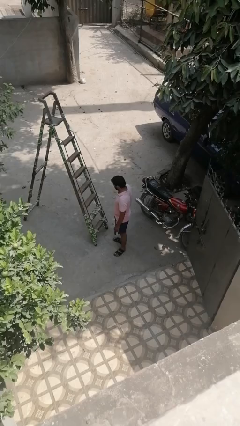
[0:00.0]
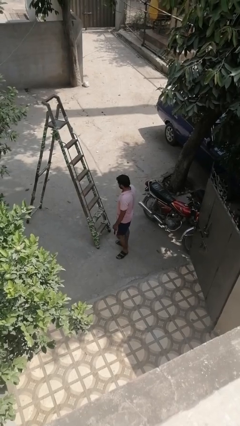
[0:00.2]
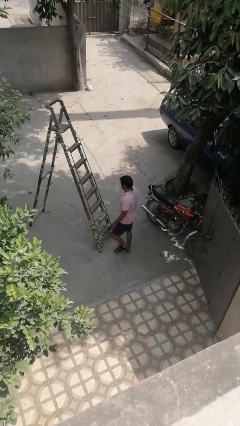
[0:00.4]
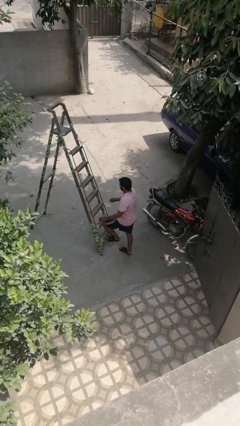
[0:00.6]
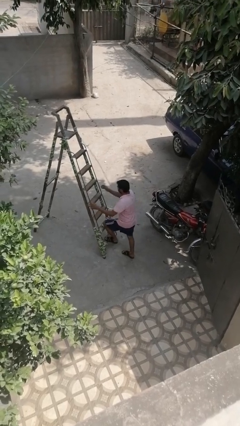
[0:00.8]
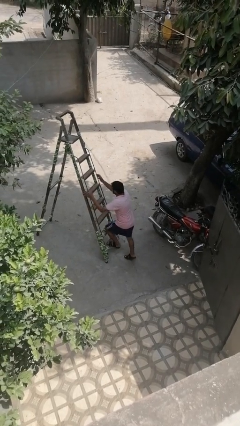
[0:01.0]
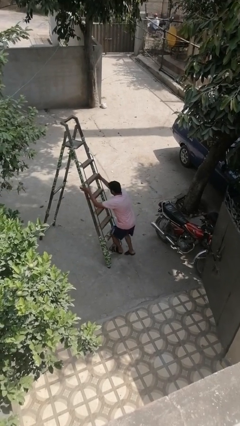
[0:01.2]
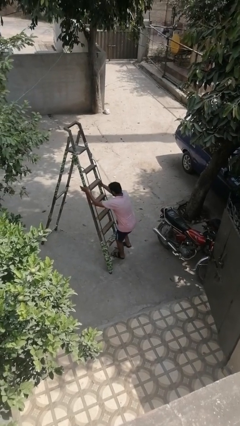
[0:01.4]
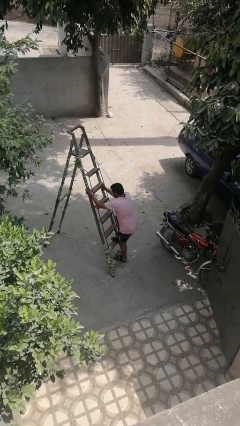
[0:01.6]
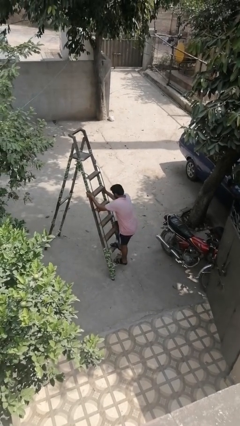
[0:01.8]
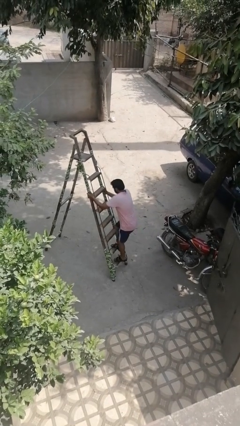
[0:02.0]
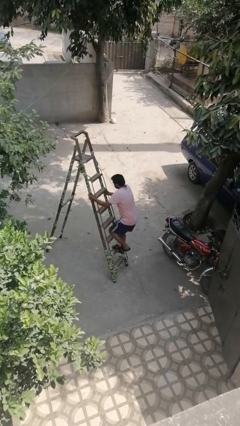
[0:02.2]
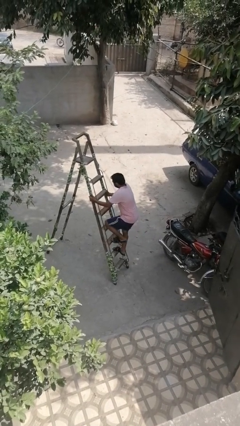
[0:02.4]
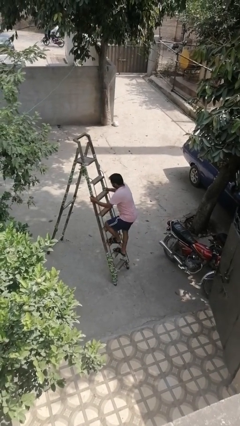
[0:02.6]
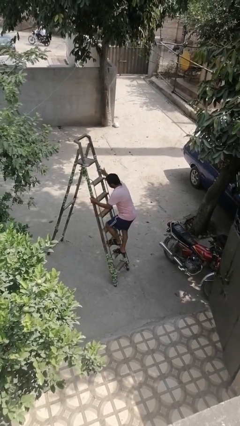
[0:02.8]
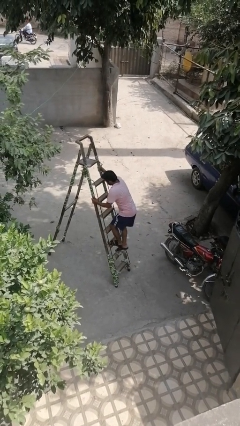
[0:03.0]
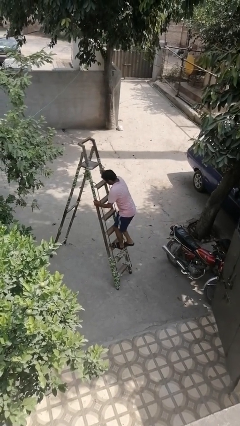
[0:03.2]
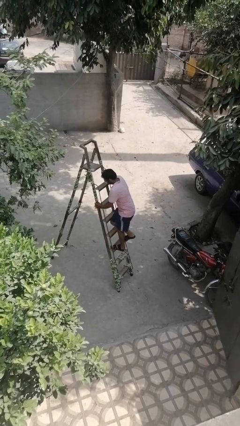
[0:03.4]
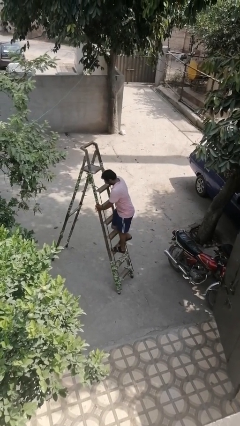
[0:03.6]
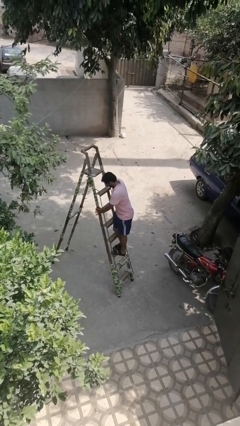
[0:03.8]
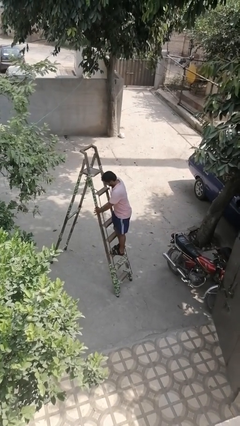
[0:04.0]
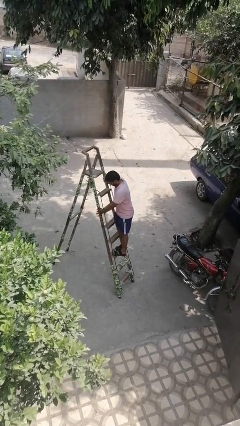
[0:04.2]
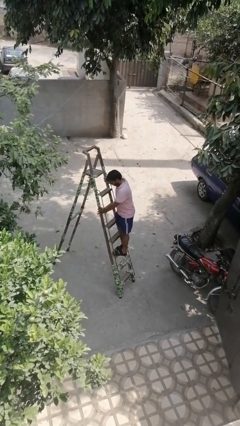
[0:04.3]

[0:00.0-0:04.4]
person climbs up ladder

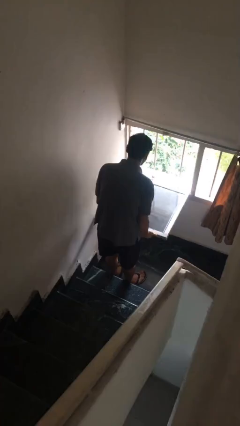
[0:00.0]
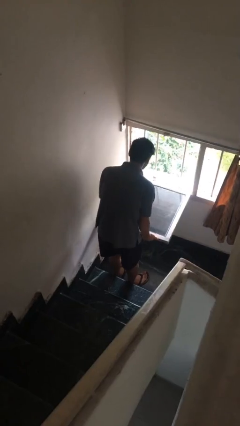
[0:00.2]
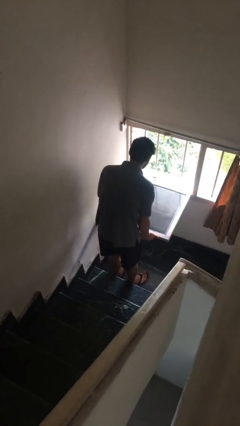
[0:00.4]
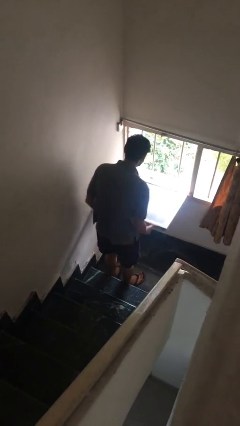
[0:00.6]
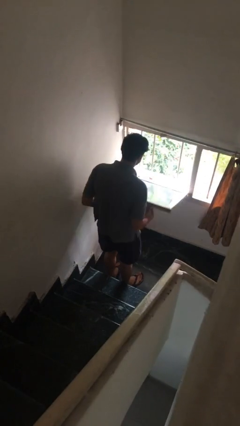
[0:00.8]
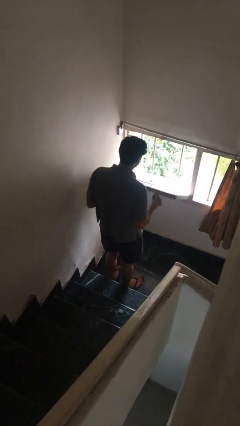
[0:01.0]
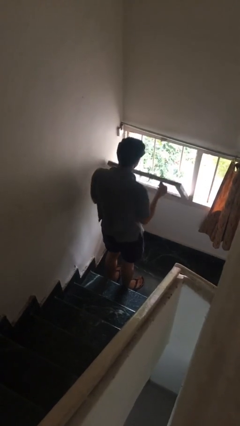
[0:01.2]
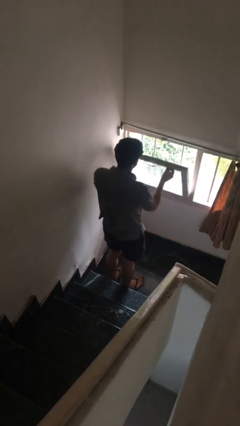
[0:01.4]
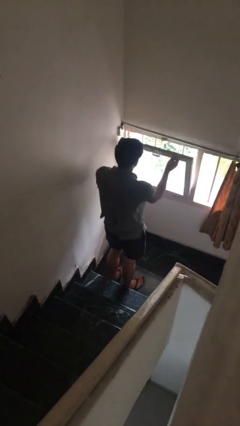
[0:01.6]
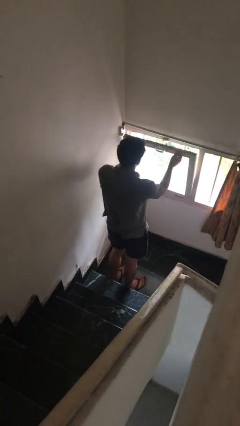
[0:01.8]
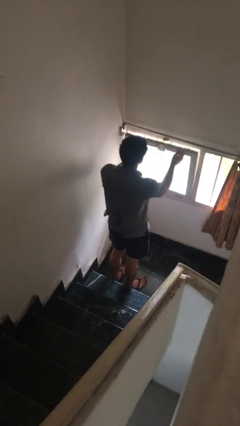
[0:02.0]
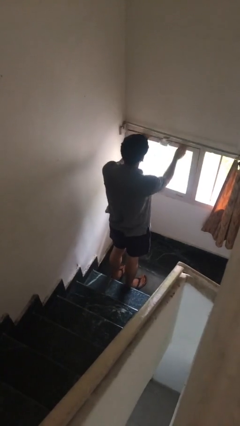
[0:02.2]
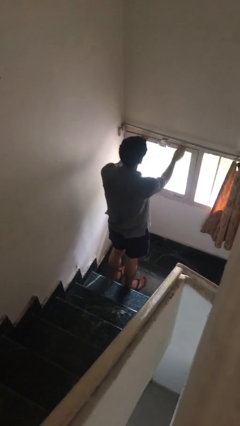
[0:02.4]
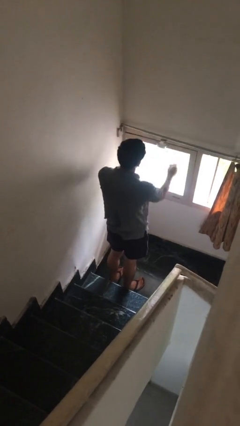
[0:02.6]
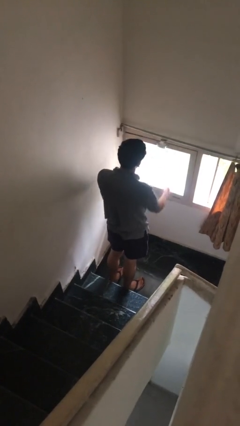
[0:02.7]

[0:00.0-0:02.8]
person closes home window

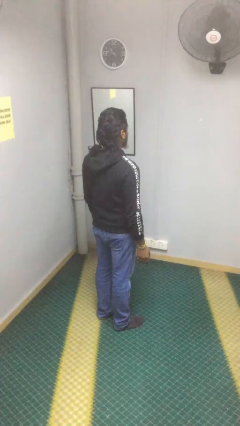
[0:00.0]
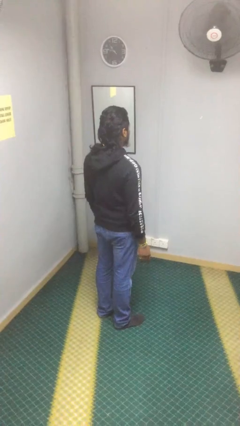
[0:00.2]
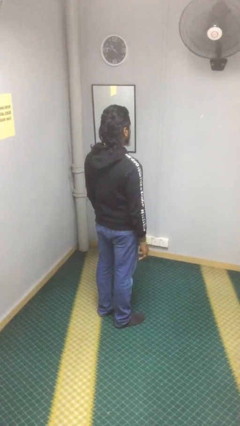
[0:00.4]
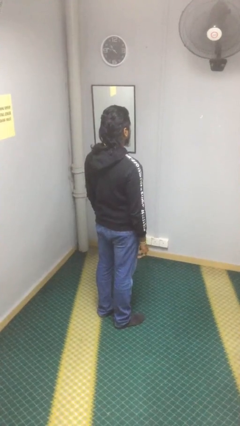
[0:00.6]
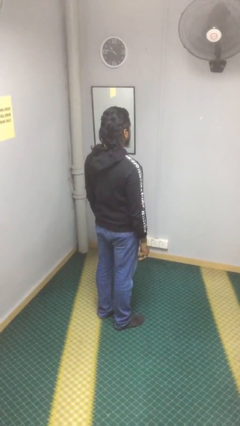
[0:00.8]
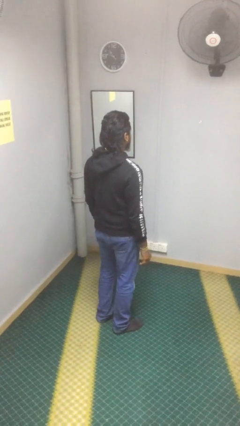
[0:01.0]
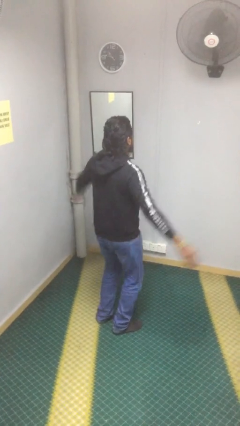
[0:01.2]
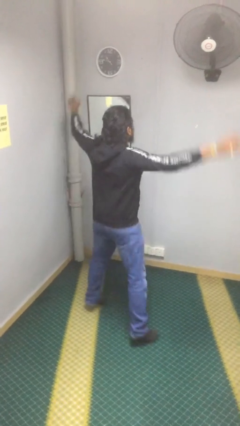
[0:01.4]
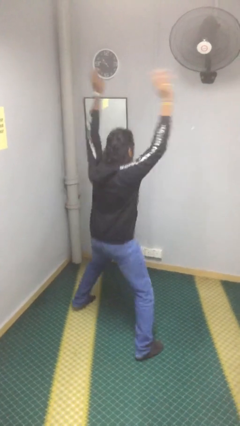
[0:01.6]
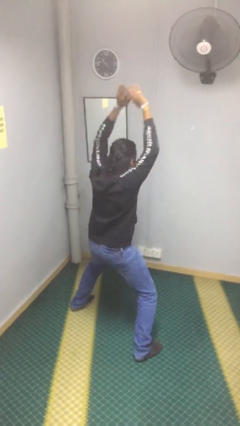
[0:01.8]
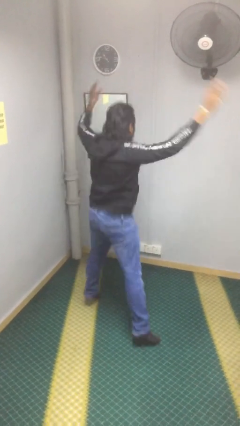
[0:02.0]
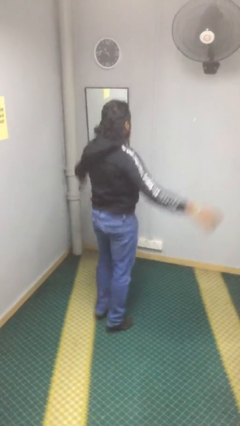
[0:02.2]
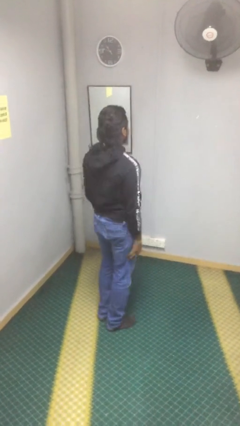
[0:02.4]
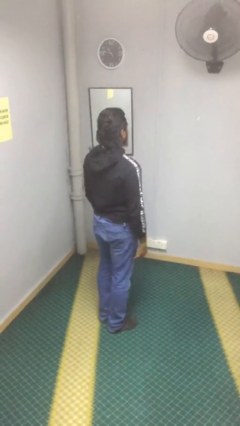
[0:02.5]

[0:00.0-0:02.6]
person exercises with jumping jacks

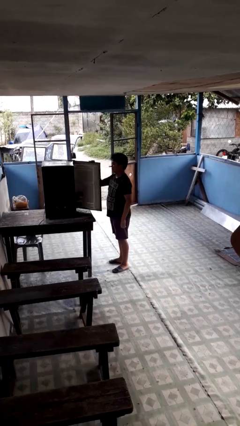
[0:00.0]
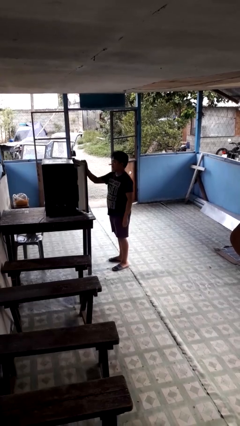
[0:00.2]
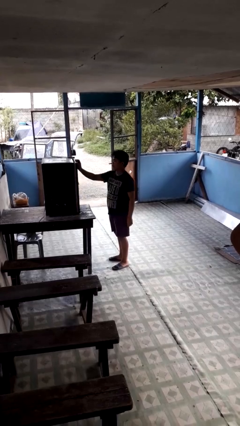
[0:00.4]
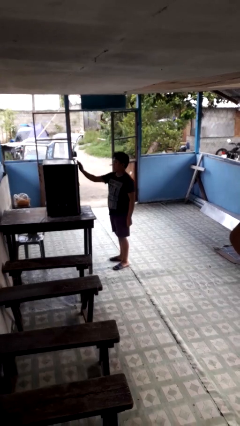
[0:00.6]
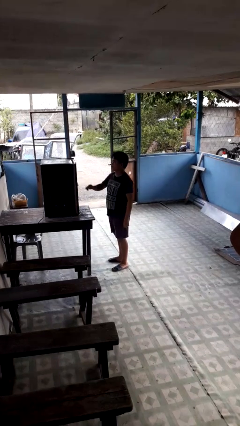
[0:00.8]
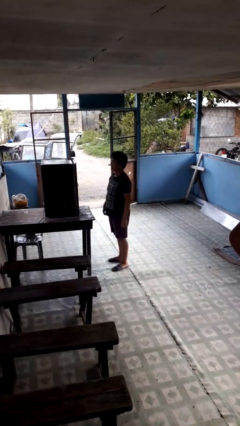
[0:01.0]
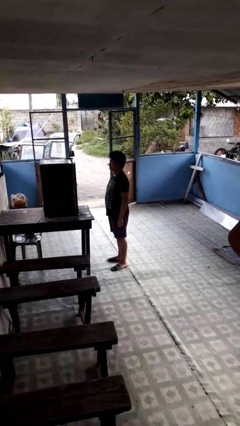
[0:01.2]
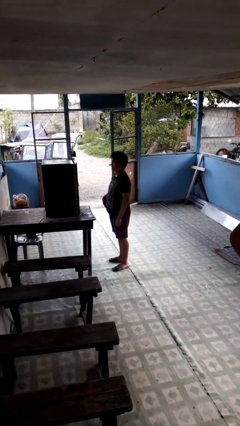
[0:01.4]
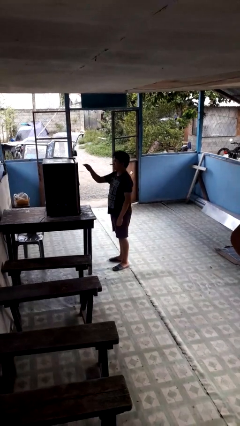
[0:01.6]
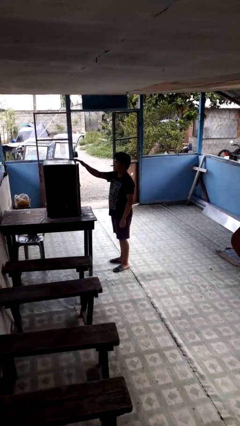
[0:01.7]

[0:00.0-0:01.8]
person closes refrigerator

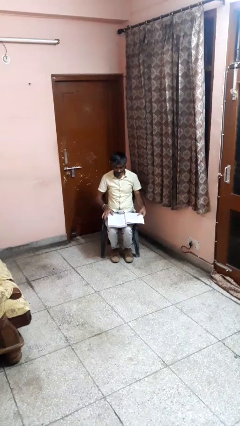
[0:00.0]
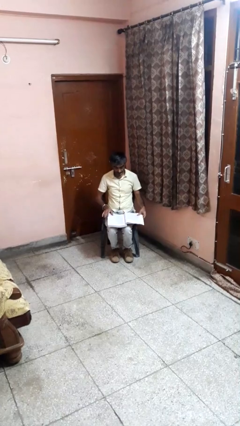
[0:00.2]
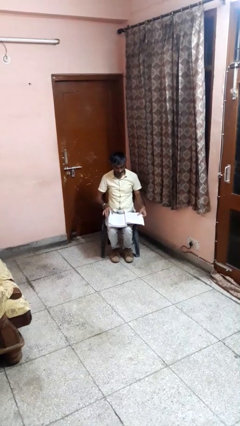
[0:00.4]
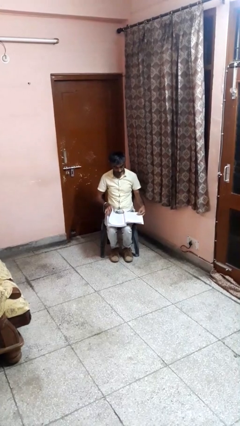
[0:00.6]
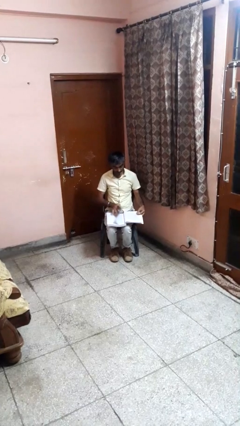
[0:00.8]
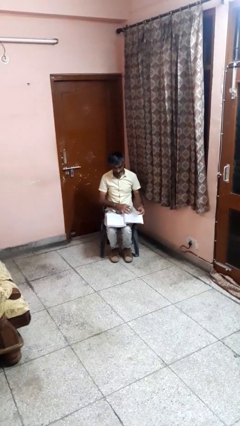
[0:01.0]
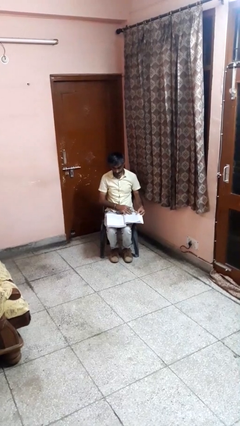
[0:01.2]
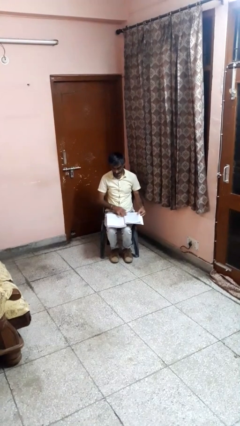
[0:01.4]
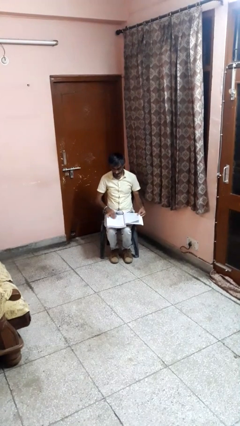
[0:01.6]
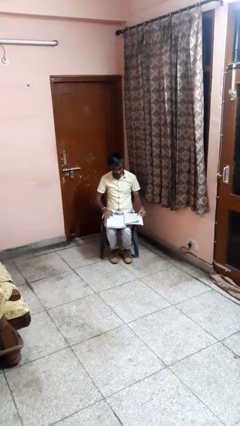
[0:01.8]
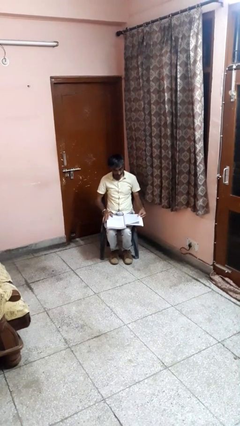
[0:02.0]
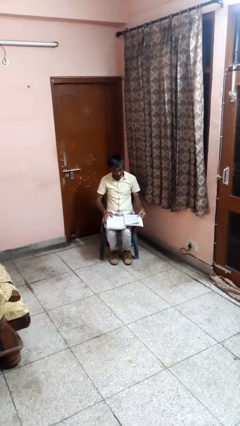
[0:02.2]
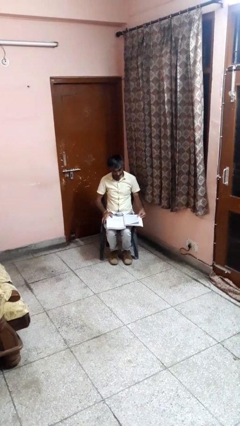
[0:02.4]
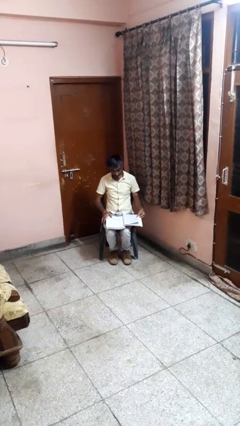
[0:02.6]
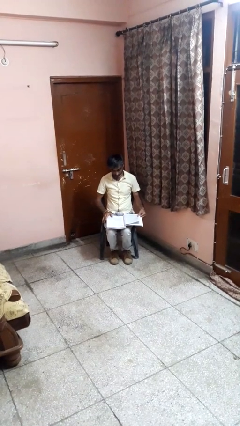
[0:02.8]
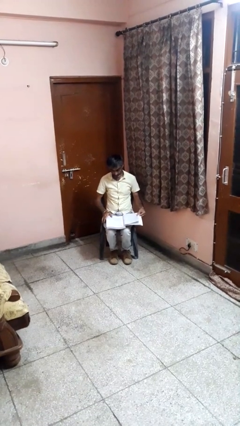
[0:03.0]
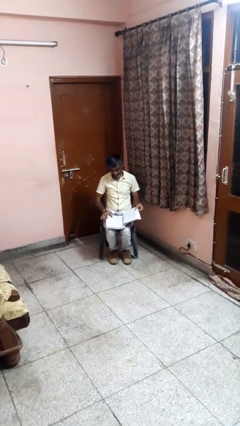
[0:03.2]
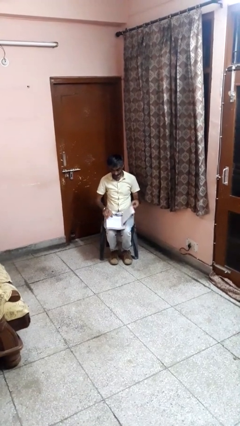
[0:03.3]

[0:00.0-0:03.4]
person reads book

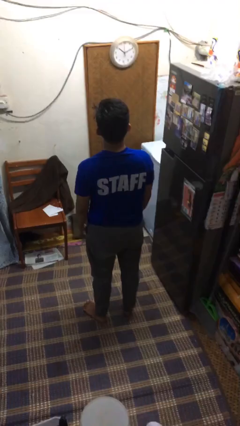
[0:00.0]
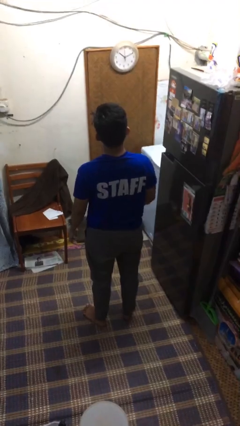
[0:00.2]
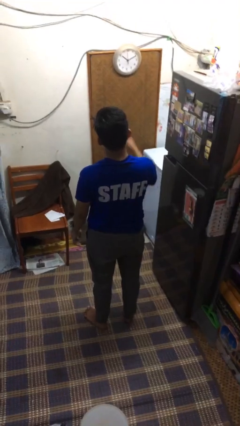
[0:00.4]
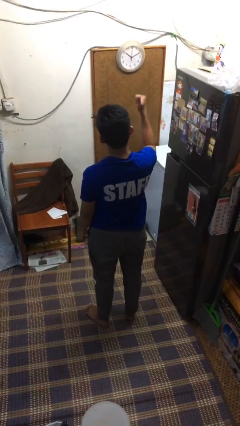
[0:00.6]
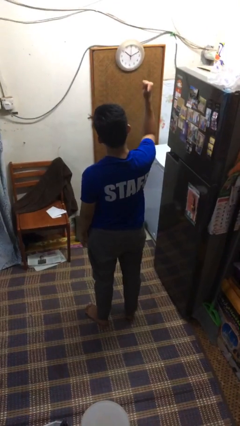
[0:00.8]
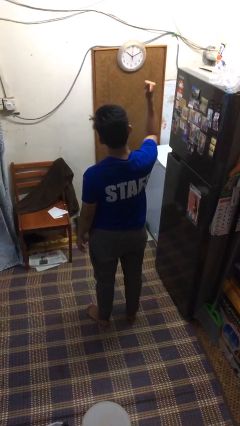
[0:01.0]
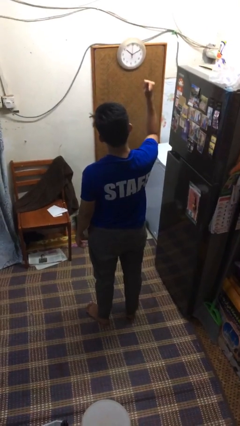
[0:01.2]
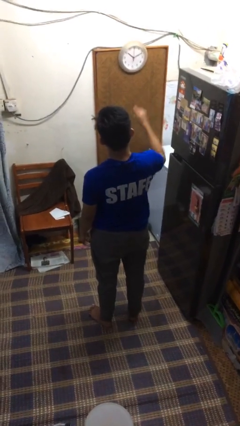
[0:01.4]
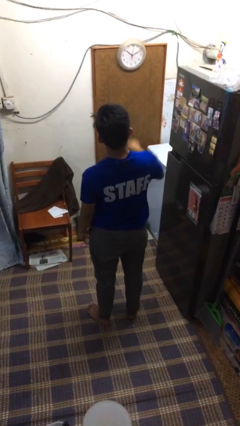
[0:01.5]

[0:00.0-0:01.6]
person gestures thumbs up

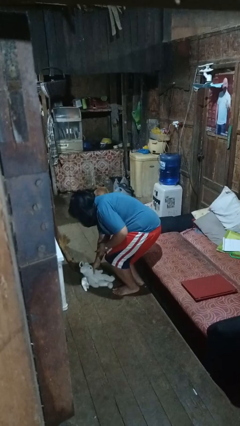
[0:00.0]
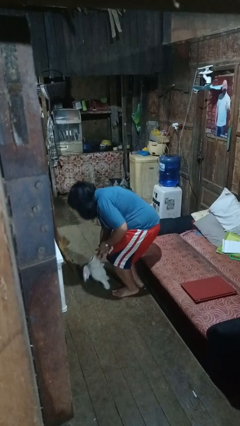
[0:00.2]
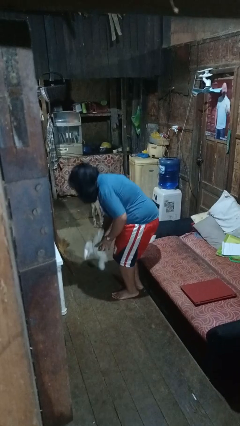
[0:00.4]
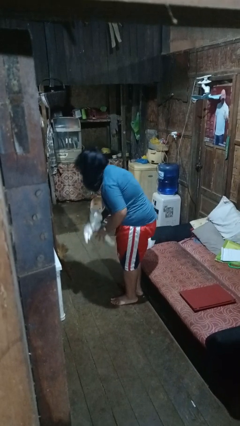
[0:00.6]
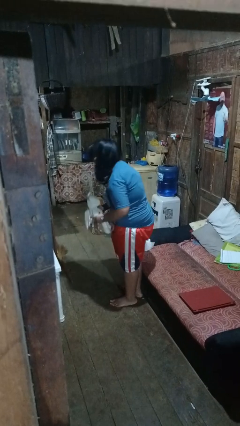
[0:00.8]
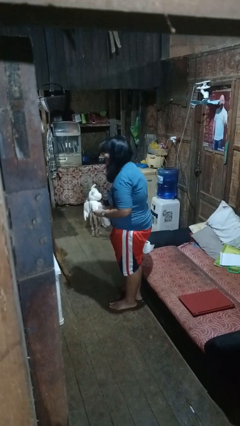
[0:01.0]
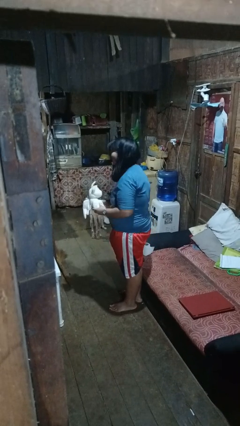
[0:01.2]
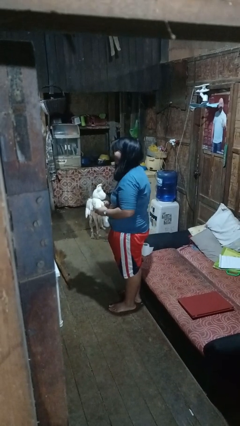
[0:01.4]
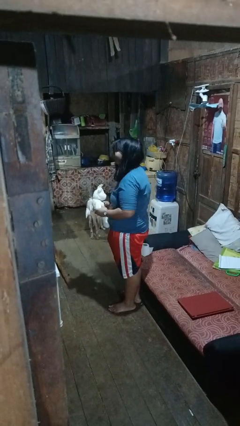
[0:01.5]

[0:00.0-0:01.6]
person picks up object from floor
